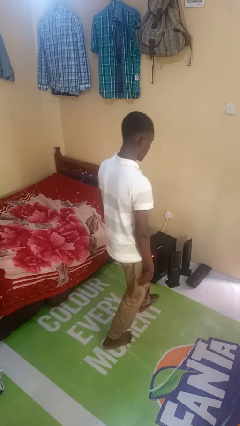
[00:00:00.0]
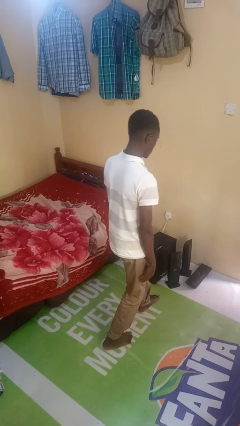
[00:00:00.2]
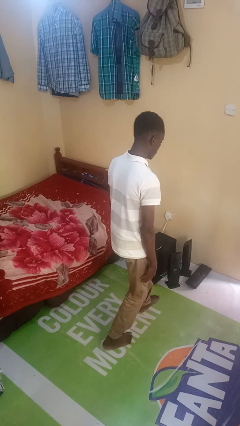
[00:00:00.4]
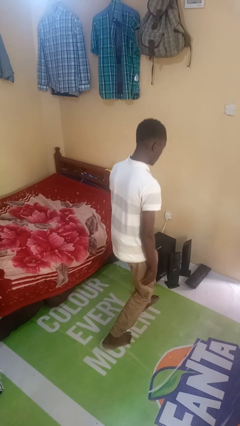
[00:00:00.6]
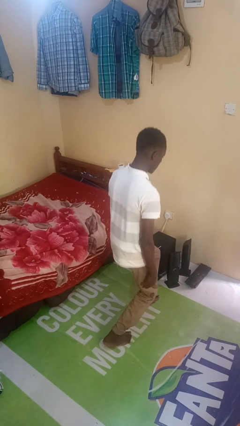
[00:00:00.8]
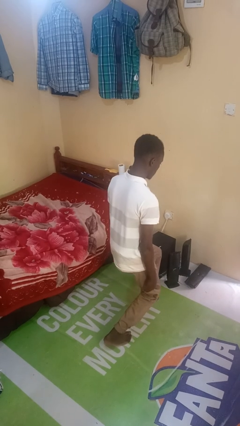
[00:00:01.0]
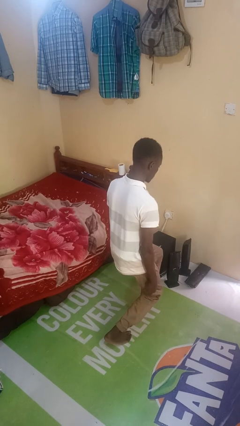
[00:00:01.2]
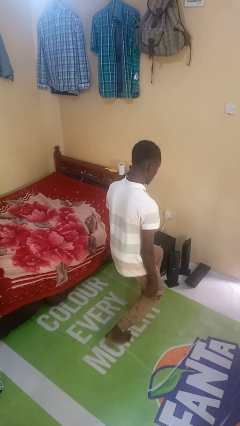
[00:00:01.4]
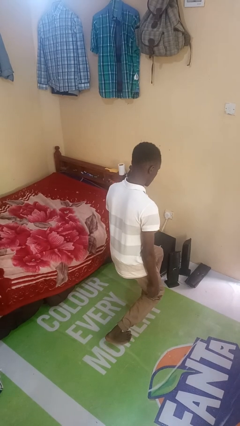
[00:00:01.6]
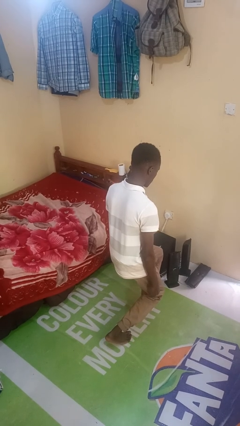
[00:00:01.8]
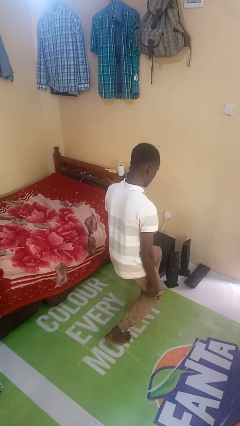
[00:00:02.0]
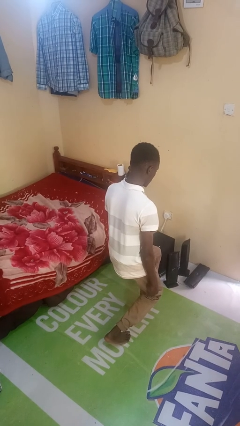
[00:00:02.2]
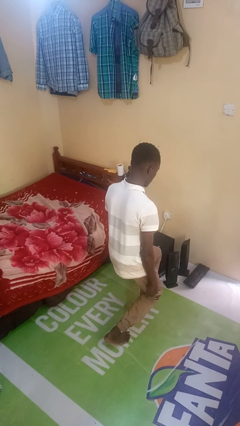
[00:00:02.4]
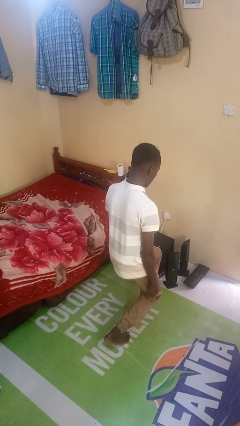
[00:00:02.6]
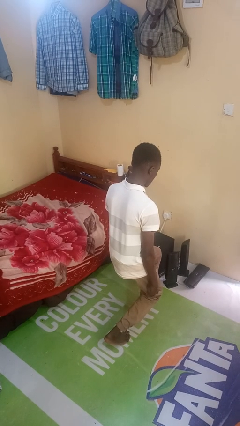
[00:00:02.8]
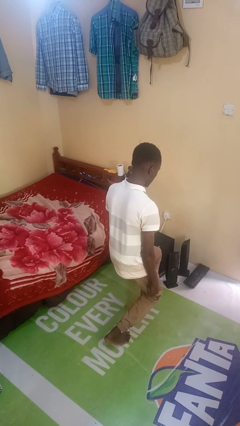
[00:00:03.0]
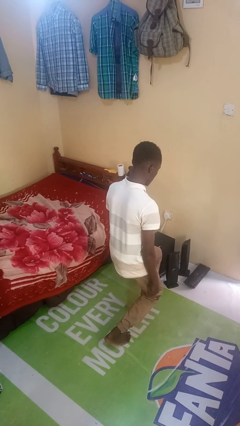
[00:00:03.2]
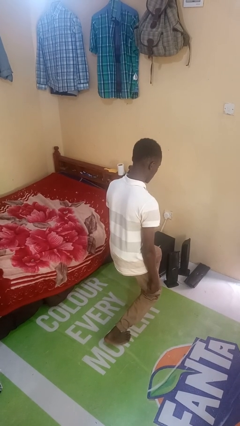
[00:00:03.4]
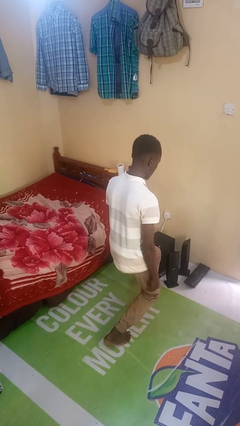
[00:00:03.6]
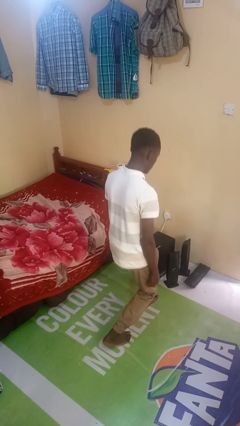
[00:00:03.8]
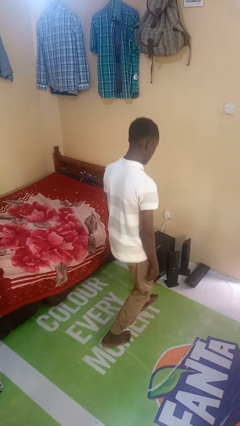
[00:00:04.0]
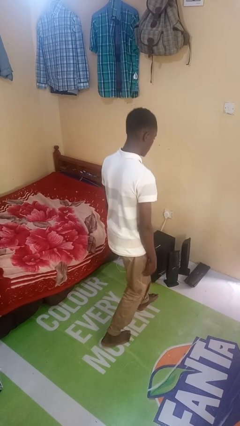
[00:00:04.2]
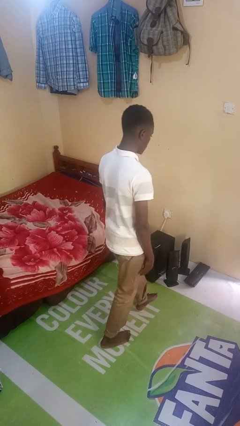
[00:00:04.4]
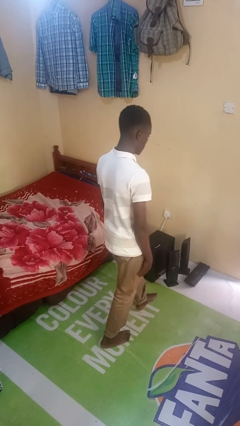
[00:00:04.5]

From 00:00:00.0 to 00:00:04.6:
person exercises with lunges

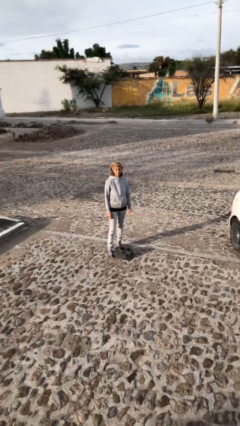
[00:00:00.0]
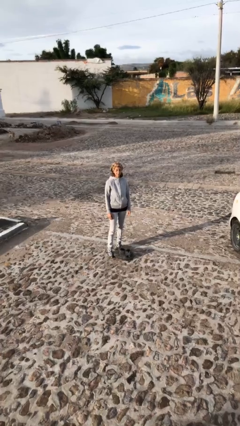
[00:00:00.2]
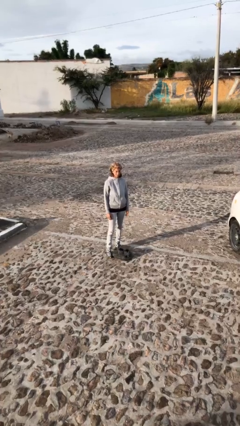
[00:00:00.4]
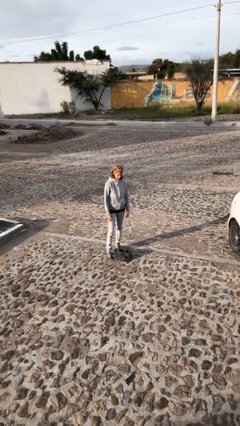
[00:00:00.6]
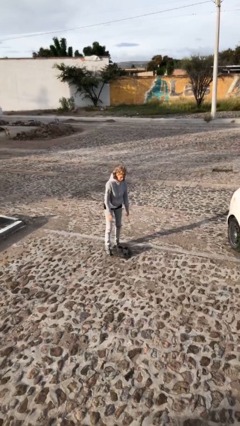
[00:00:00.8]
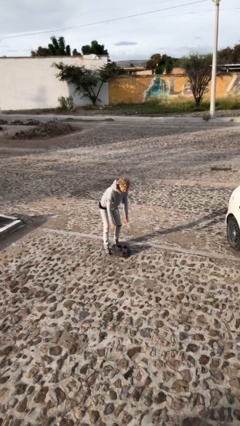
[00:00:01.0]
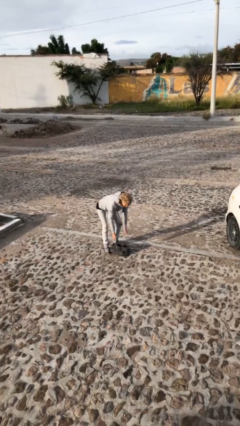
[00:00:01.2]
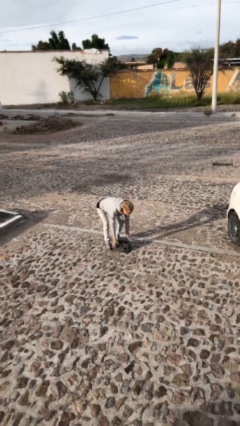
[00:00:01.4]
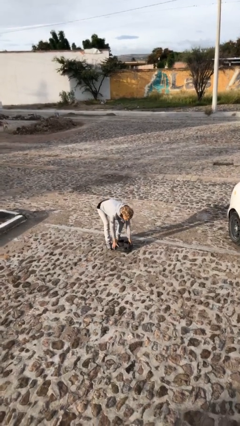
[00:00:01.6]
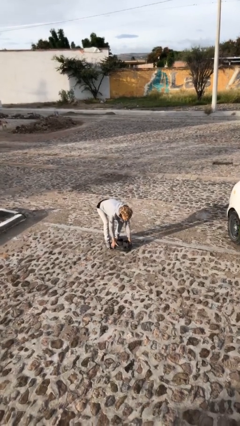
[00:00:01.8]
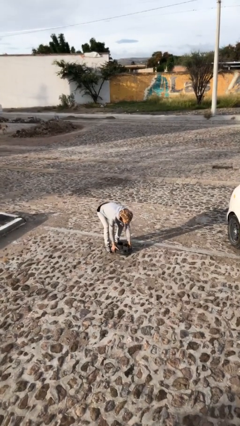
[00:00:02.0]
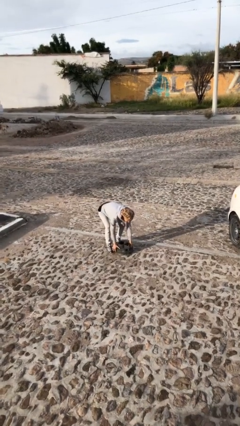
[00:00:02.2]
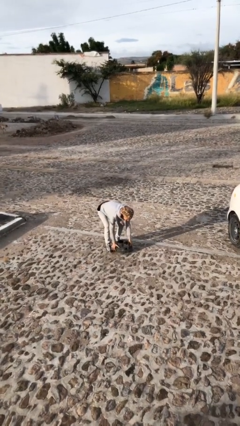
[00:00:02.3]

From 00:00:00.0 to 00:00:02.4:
person picks up object from floor

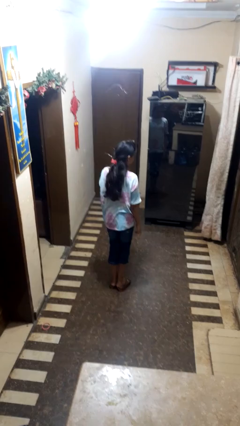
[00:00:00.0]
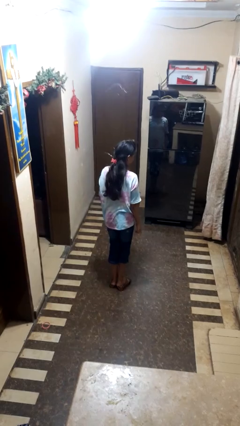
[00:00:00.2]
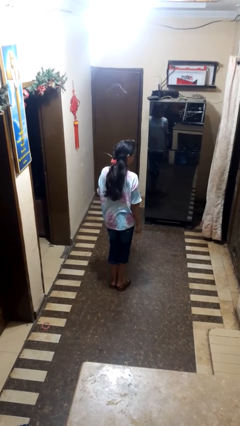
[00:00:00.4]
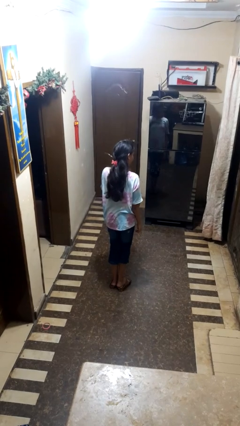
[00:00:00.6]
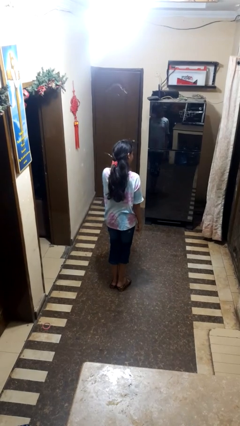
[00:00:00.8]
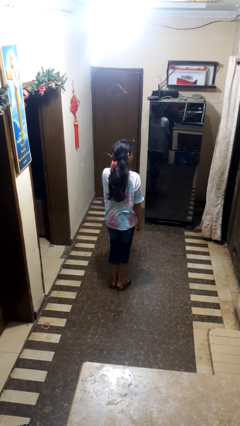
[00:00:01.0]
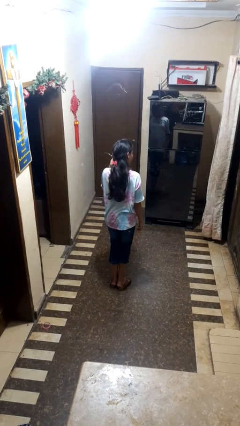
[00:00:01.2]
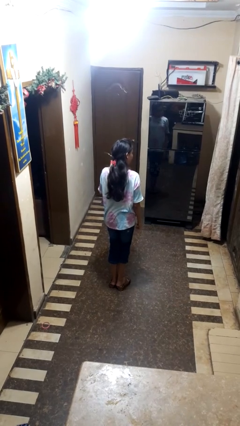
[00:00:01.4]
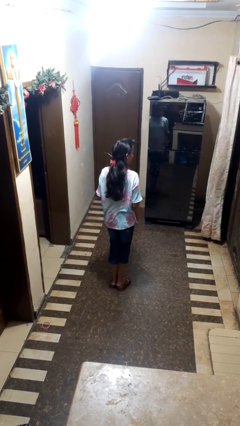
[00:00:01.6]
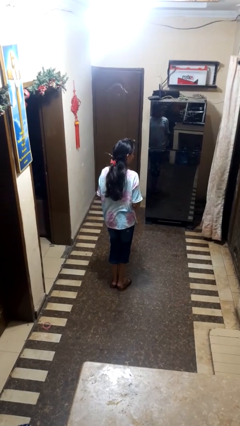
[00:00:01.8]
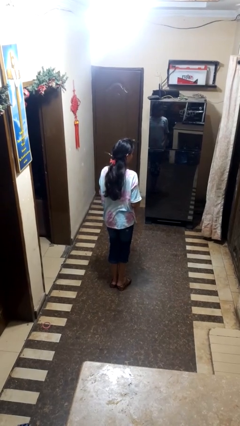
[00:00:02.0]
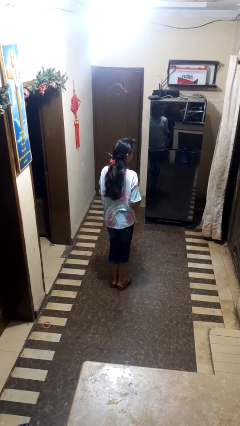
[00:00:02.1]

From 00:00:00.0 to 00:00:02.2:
person takes off earrings

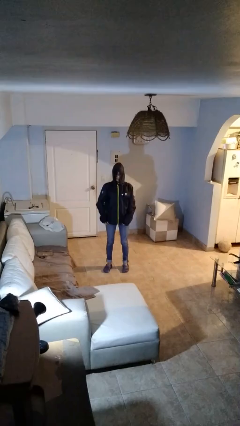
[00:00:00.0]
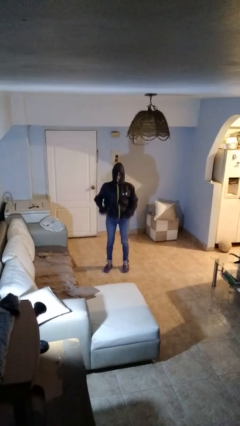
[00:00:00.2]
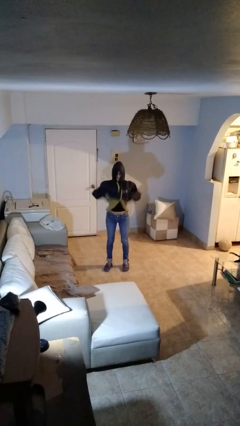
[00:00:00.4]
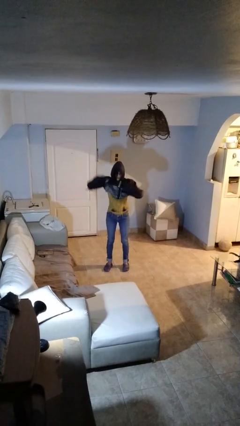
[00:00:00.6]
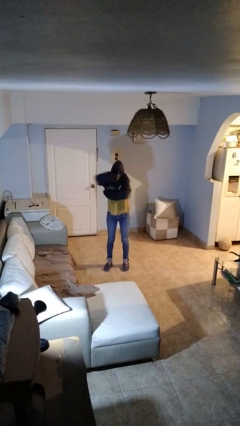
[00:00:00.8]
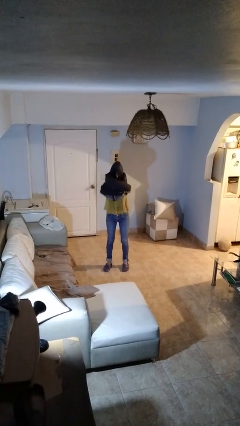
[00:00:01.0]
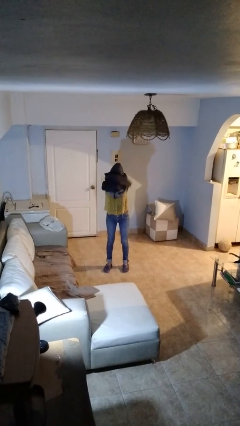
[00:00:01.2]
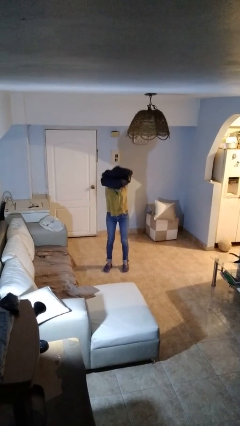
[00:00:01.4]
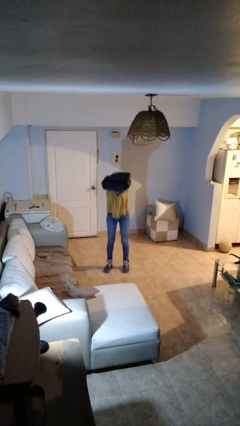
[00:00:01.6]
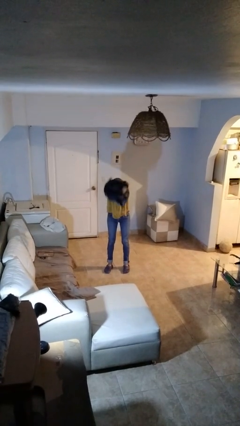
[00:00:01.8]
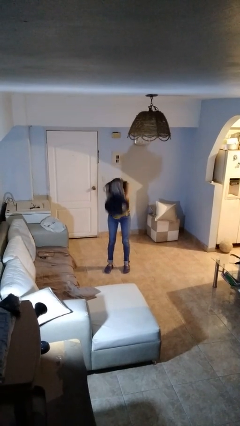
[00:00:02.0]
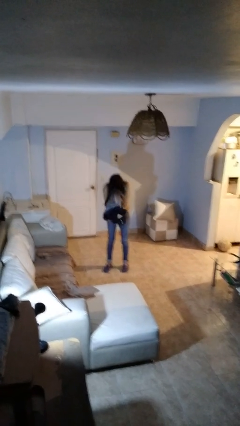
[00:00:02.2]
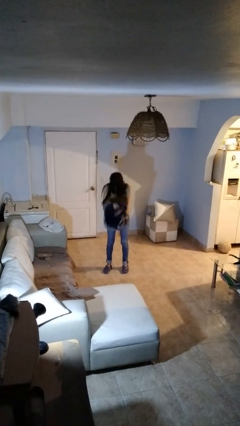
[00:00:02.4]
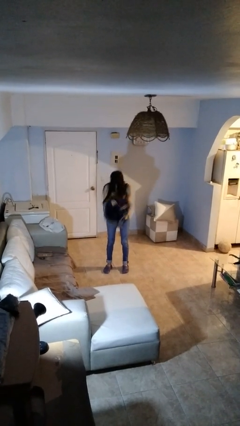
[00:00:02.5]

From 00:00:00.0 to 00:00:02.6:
person takes off hoodie

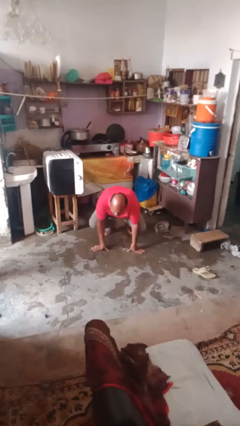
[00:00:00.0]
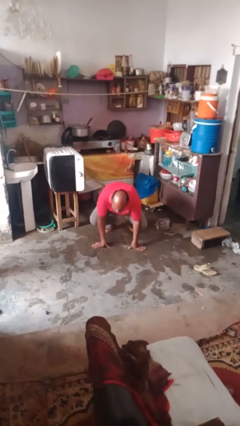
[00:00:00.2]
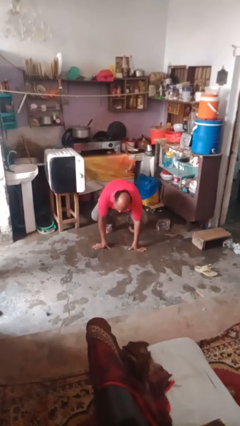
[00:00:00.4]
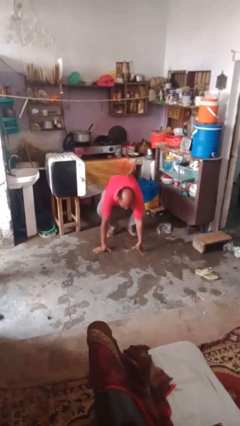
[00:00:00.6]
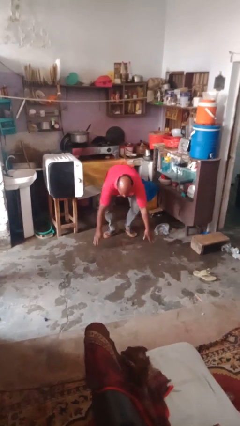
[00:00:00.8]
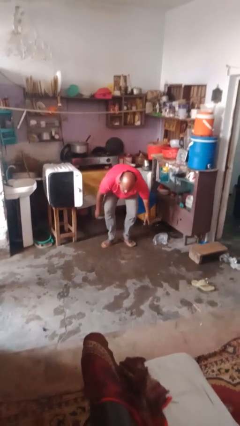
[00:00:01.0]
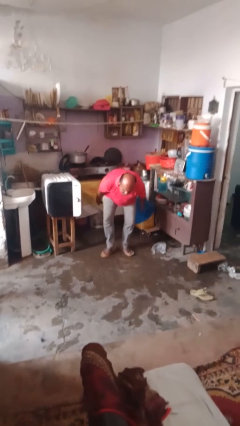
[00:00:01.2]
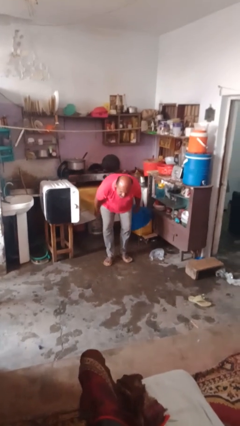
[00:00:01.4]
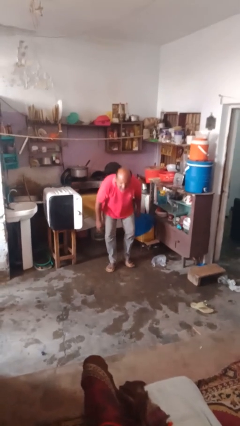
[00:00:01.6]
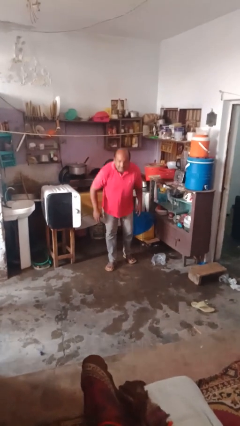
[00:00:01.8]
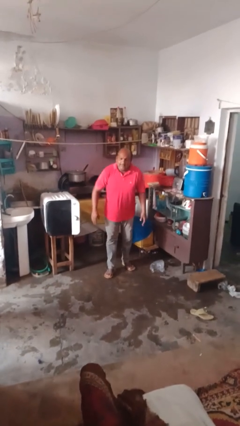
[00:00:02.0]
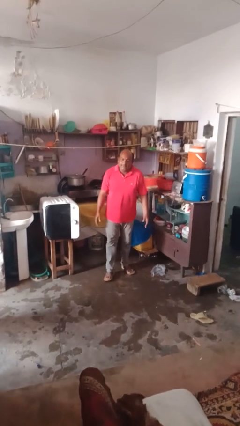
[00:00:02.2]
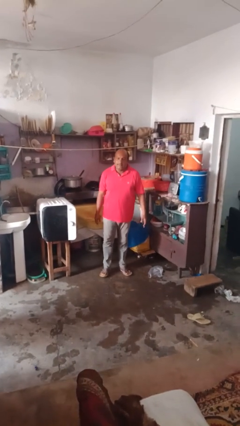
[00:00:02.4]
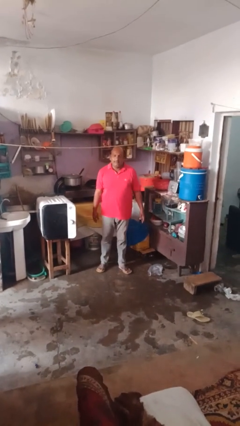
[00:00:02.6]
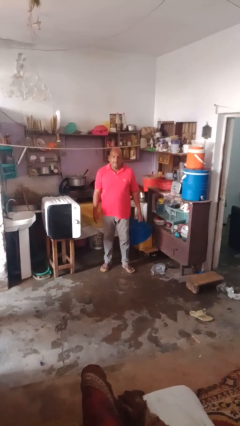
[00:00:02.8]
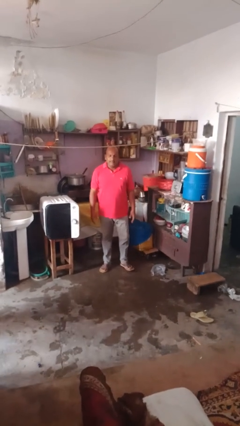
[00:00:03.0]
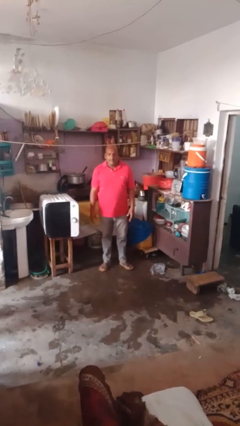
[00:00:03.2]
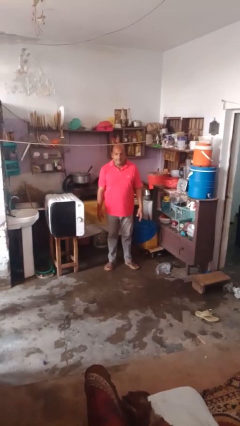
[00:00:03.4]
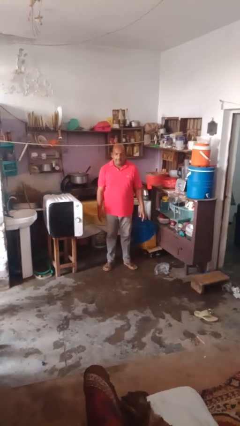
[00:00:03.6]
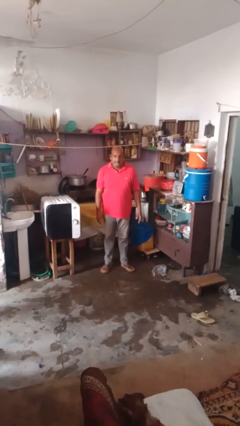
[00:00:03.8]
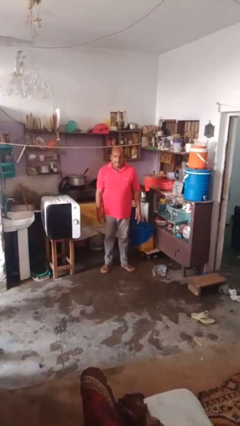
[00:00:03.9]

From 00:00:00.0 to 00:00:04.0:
person stands up from floor

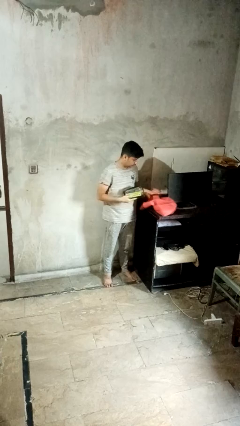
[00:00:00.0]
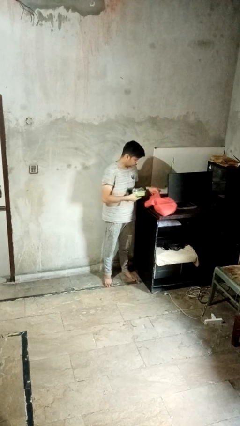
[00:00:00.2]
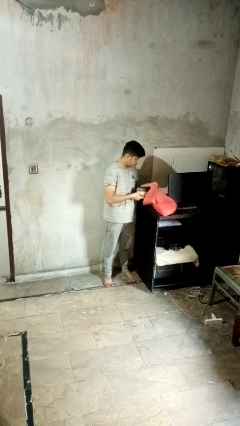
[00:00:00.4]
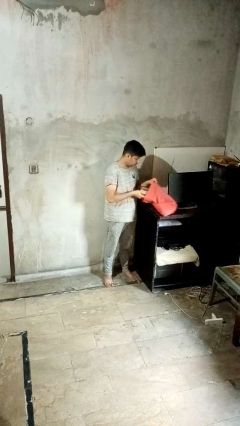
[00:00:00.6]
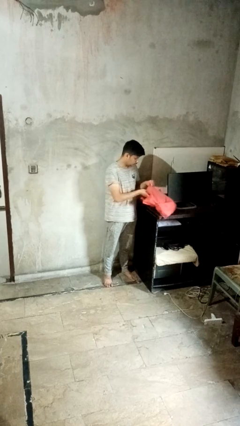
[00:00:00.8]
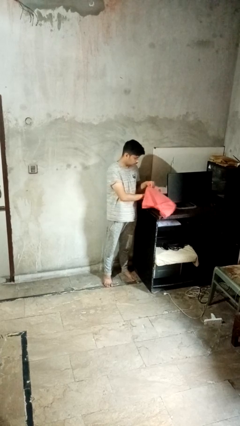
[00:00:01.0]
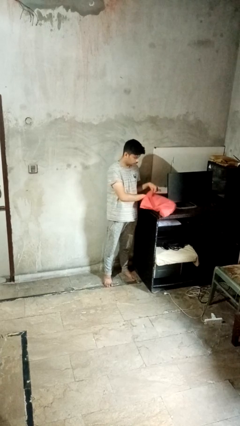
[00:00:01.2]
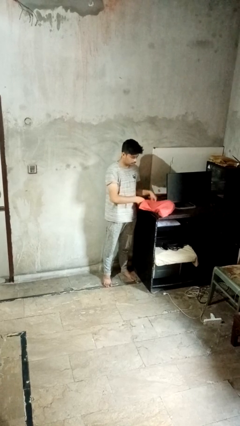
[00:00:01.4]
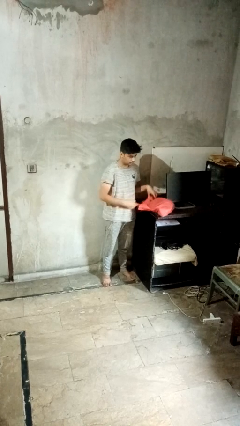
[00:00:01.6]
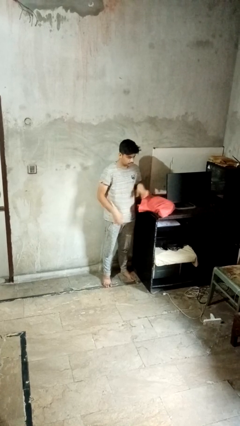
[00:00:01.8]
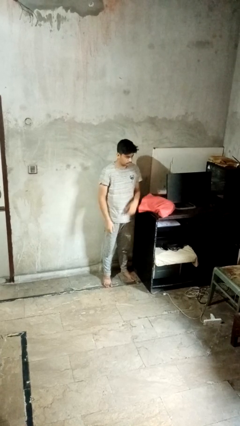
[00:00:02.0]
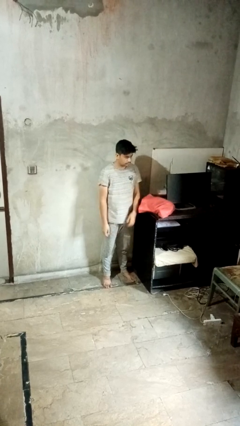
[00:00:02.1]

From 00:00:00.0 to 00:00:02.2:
person puts object into bag
